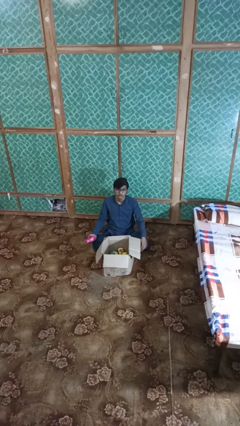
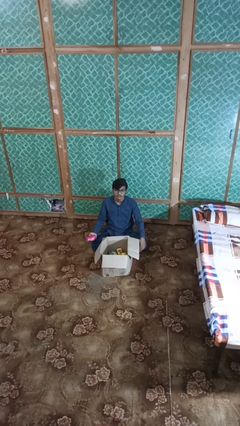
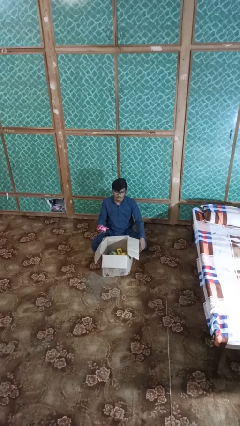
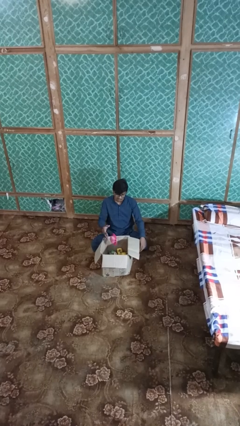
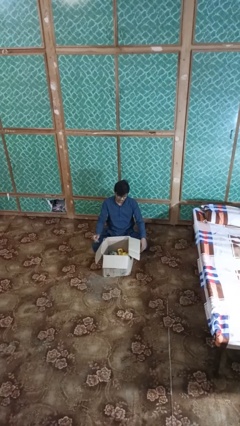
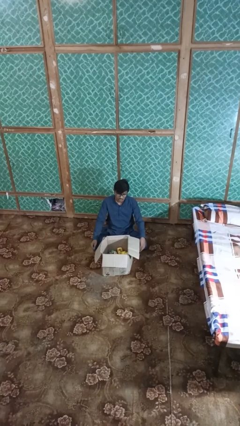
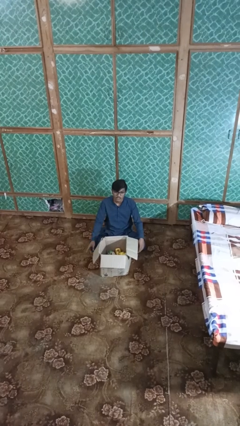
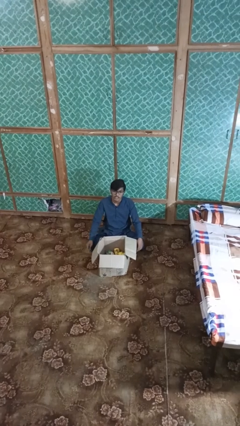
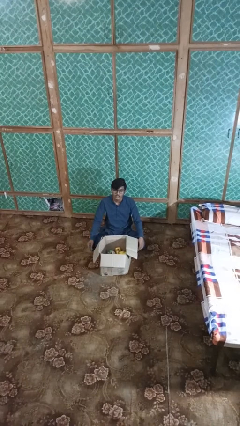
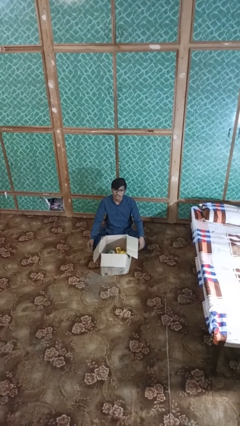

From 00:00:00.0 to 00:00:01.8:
person puts object into box

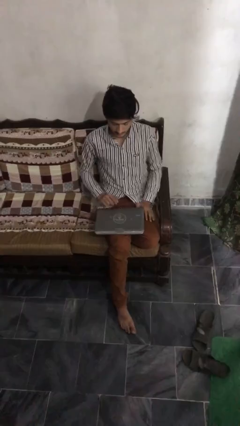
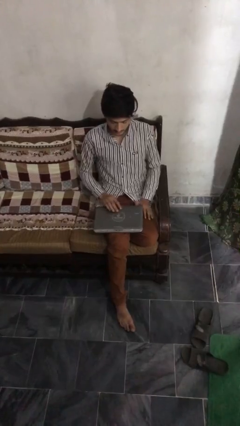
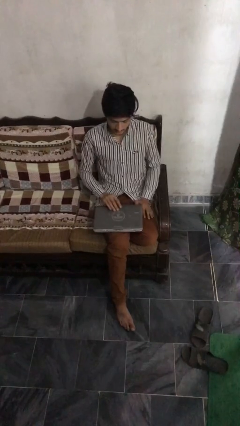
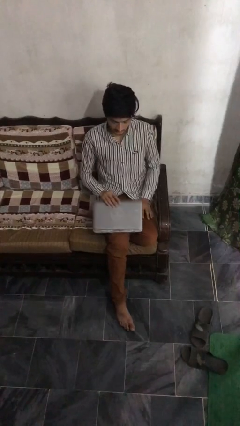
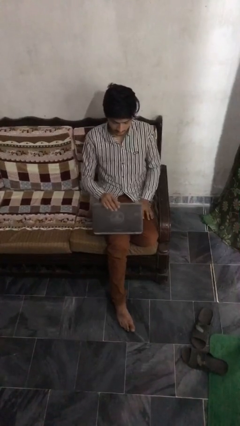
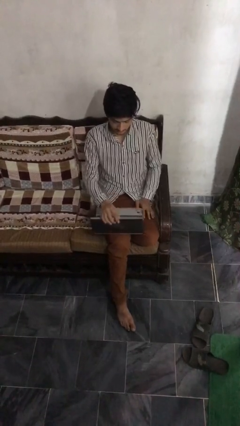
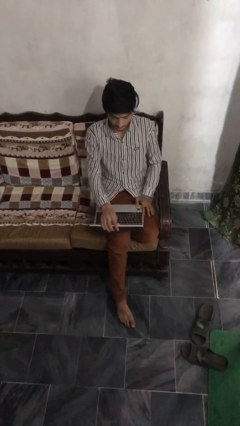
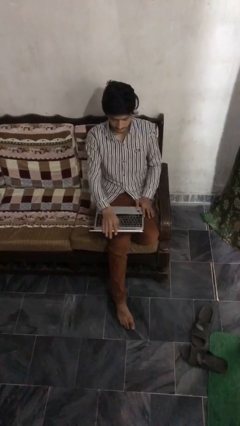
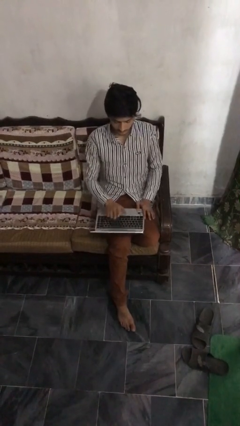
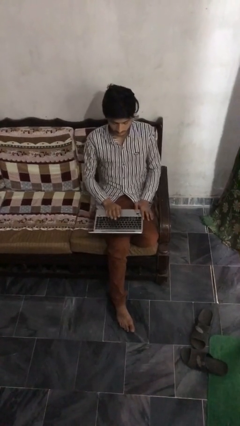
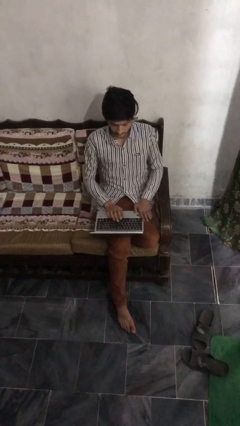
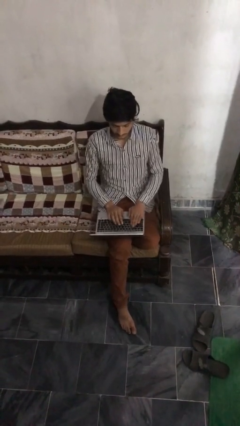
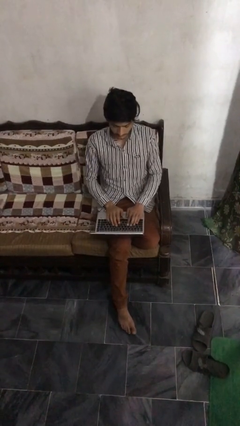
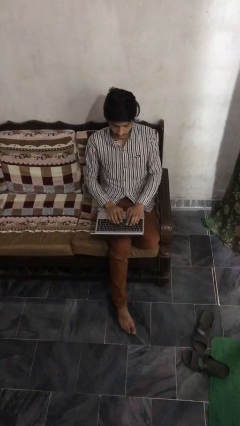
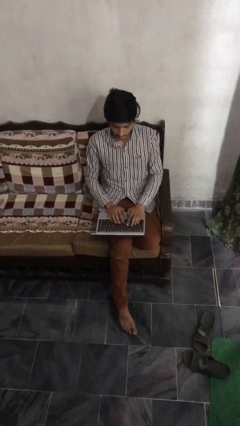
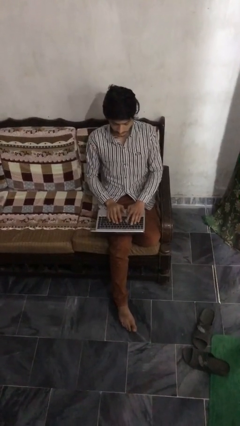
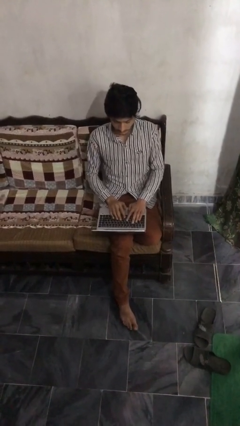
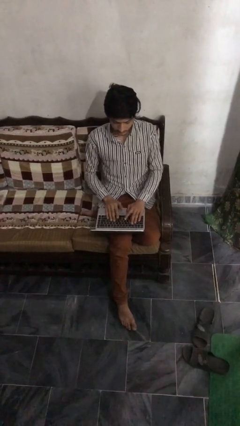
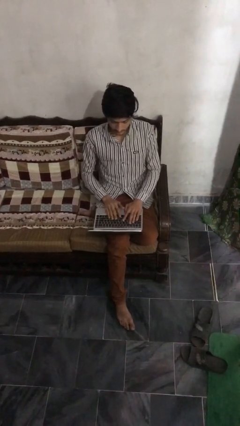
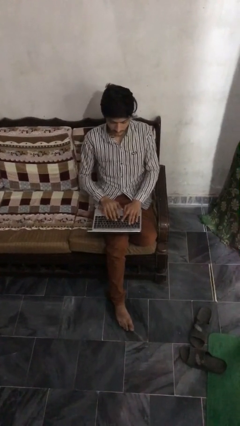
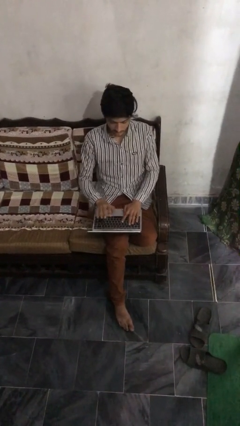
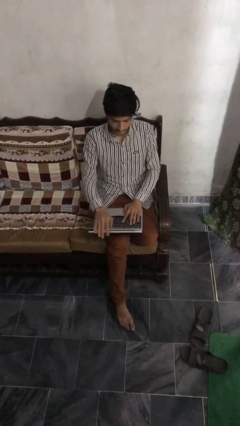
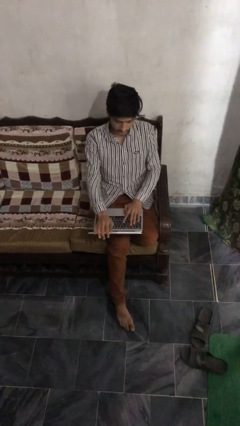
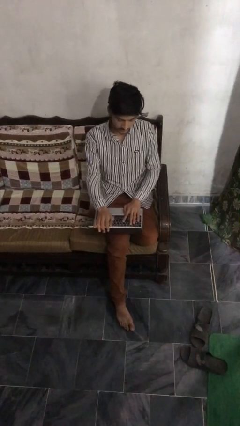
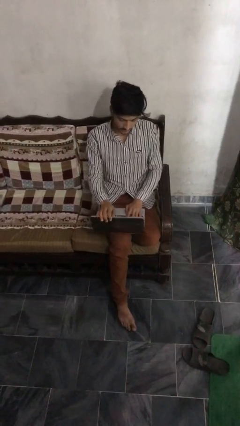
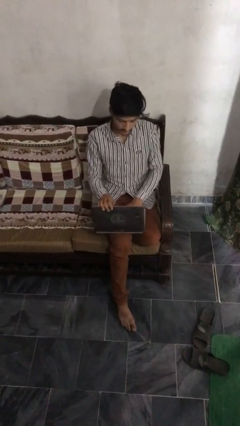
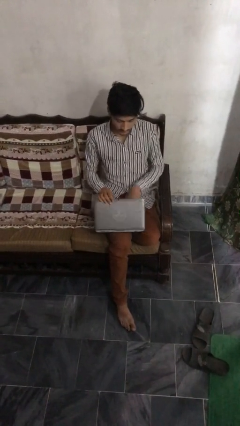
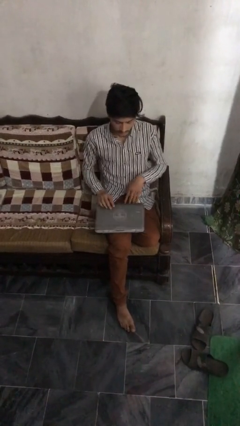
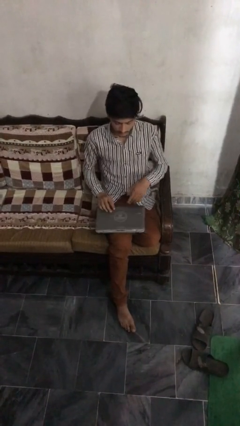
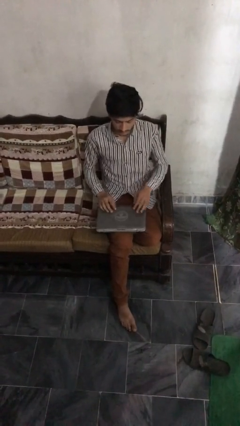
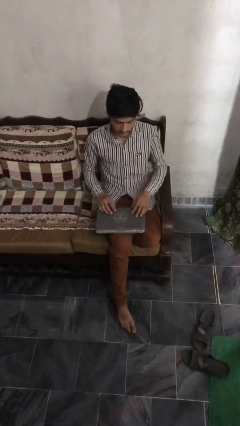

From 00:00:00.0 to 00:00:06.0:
person interacts with laptop

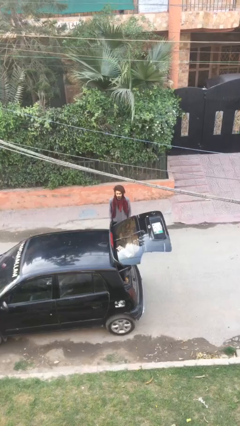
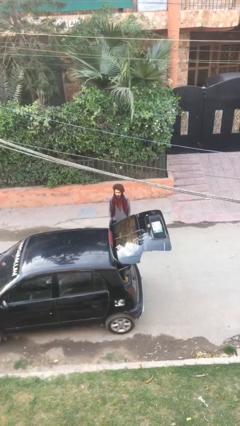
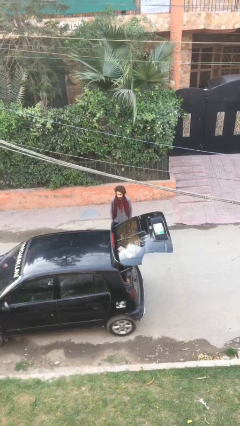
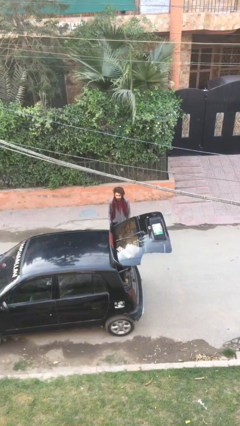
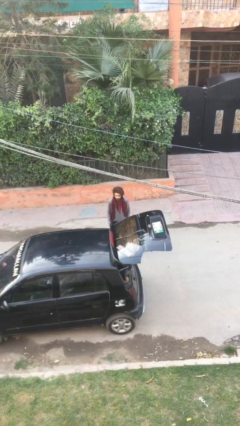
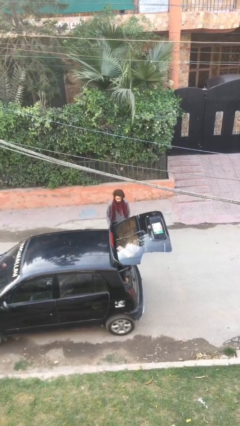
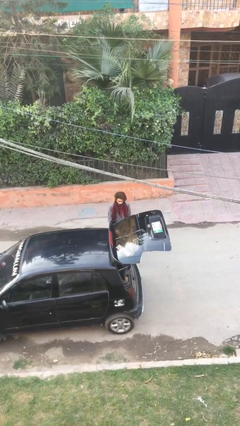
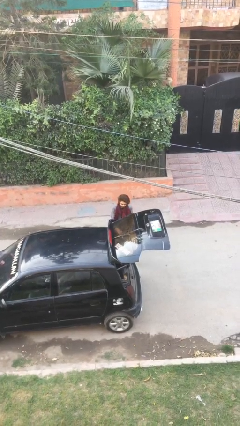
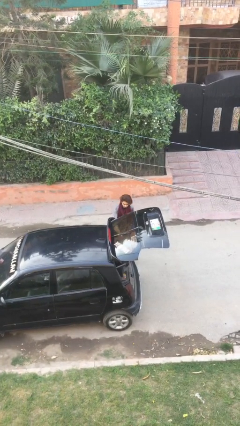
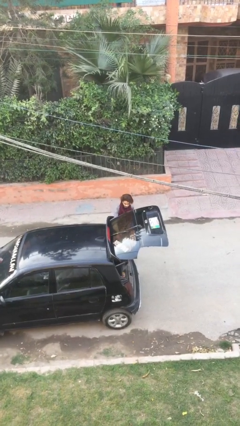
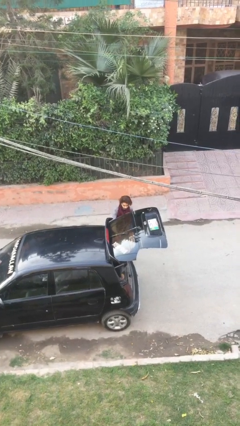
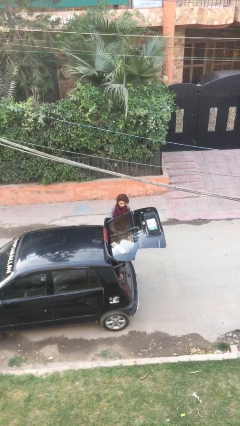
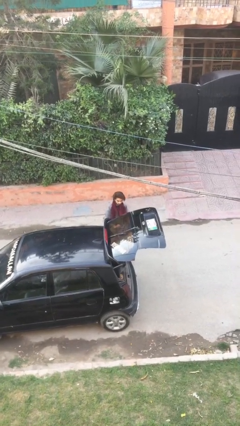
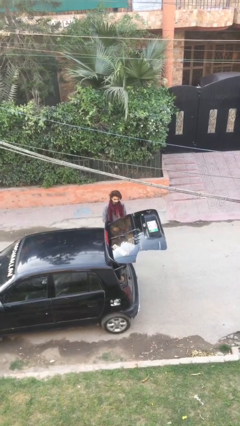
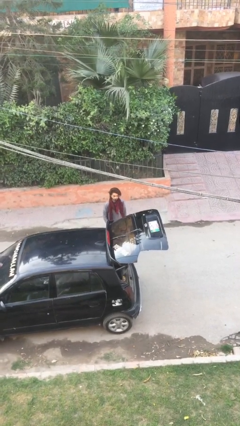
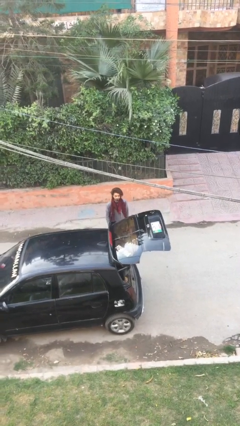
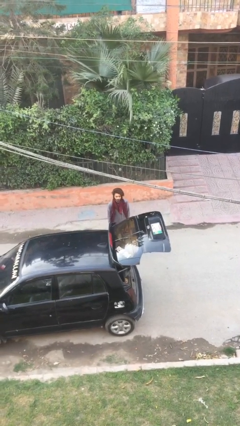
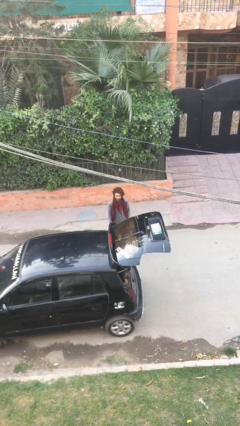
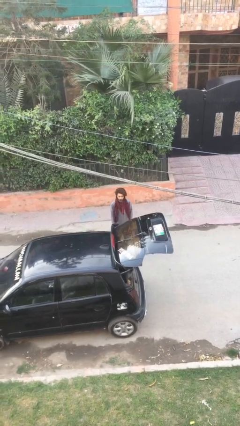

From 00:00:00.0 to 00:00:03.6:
person unloads car

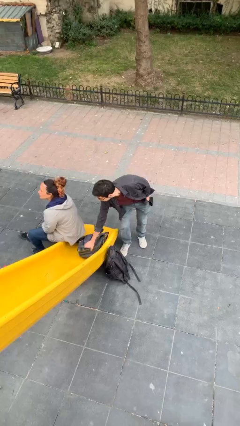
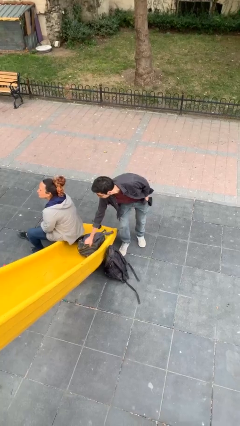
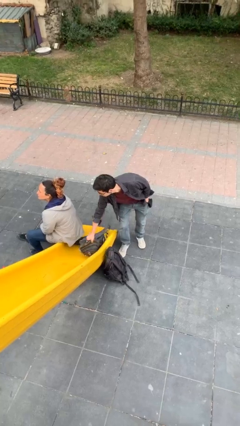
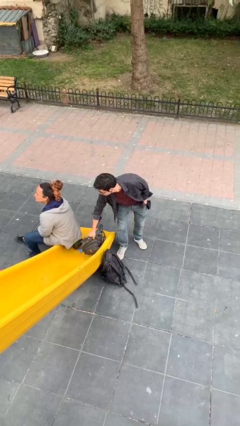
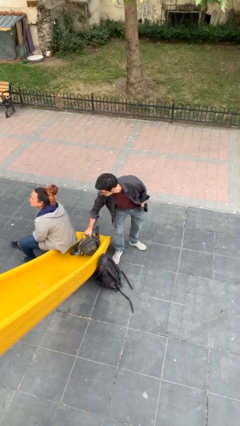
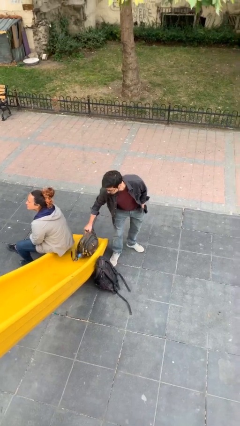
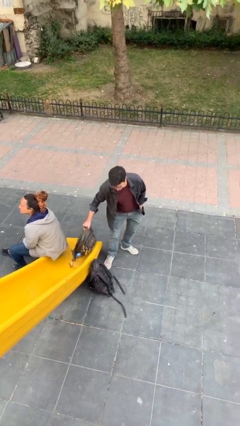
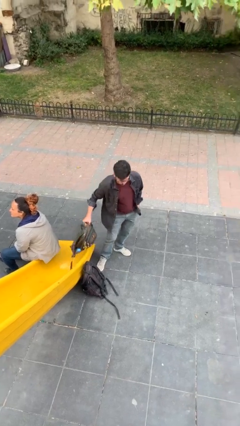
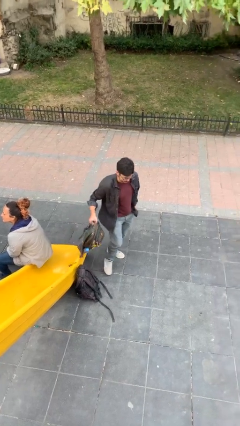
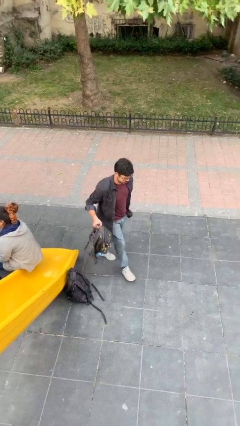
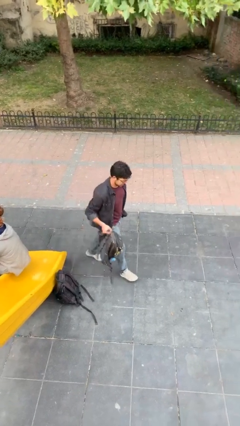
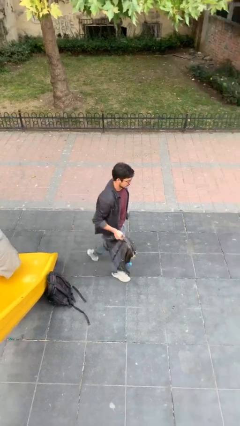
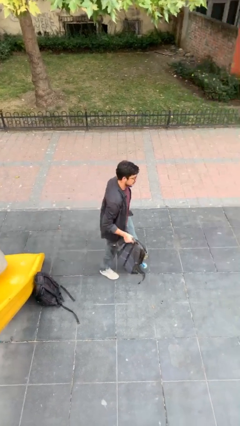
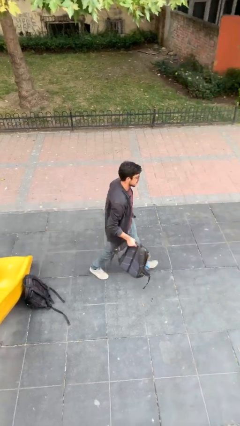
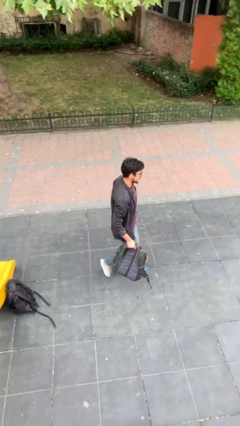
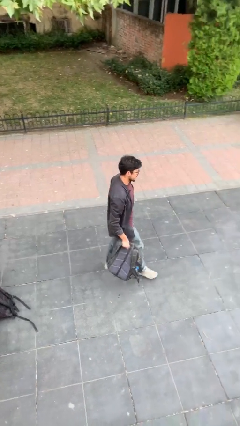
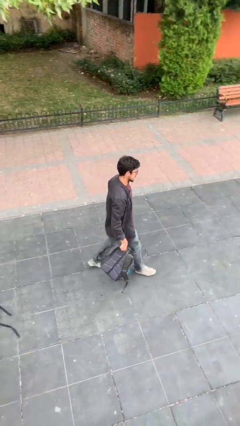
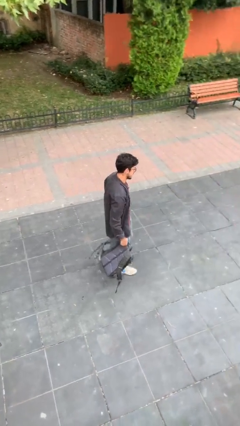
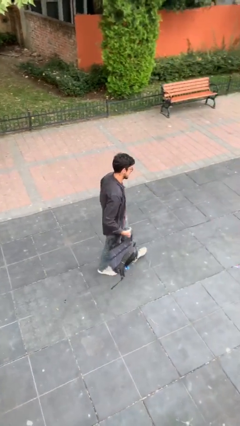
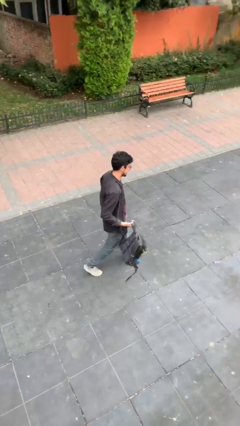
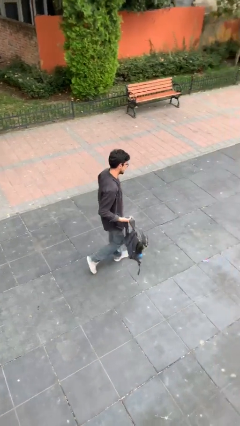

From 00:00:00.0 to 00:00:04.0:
person steals object from person

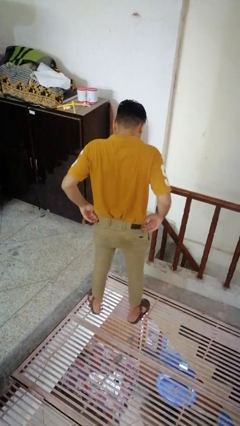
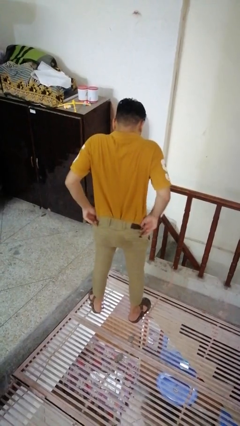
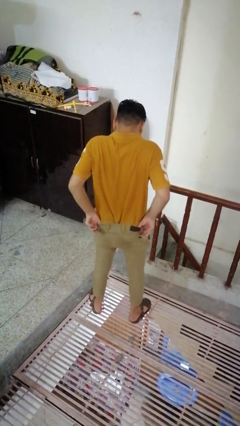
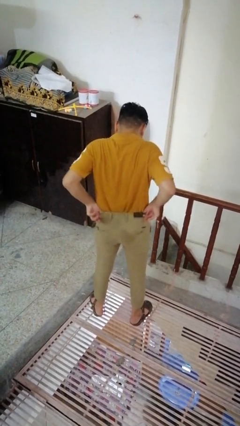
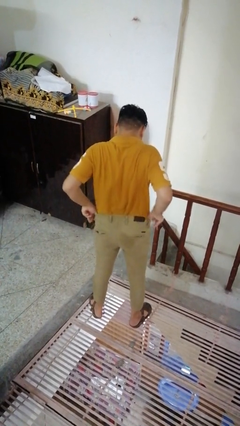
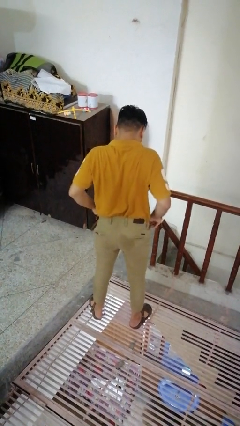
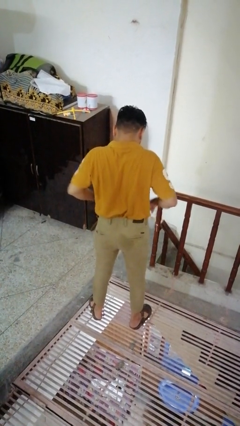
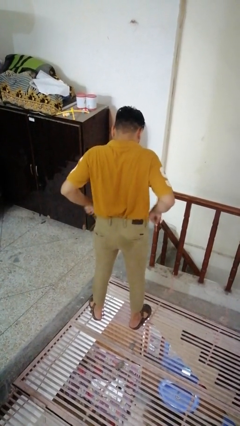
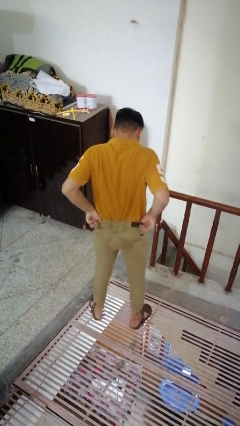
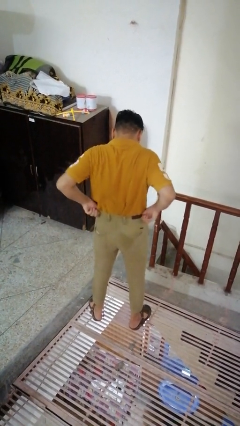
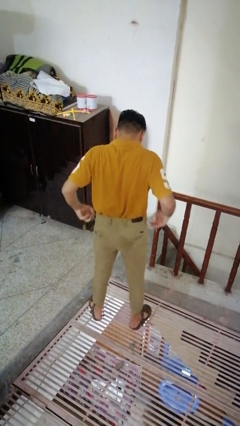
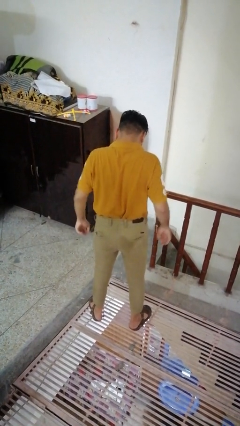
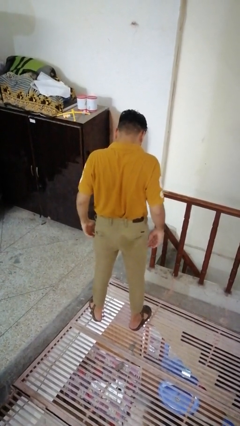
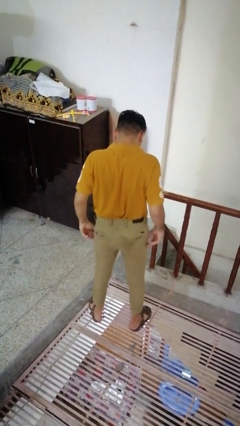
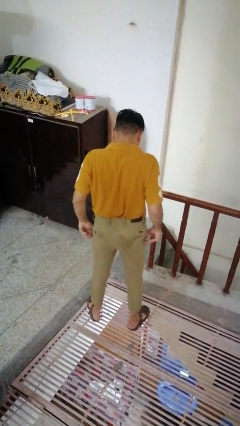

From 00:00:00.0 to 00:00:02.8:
person hikes up pants
